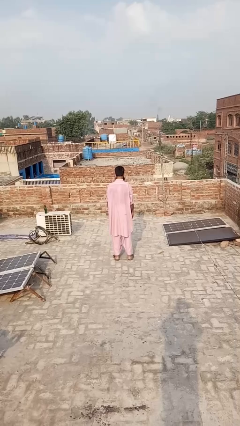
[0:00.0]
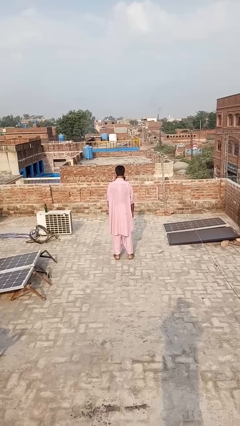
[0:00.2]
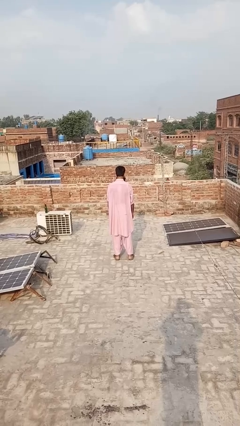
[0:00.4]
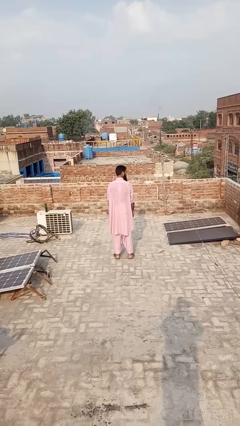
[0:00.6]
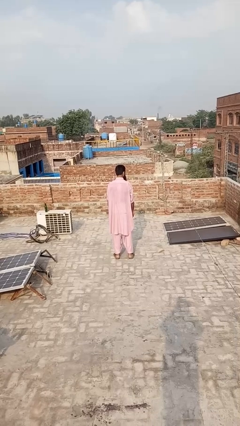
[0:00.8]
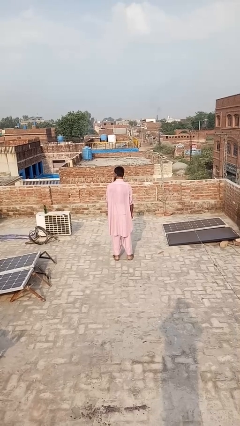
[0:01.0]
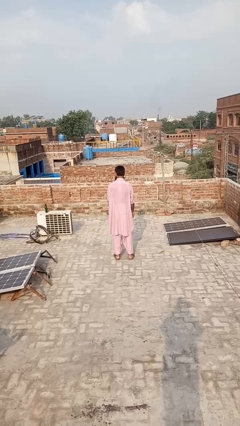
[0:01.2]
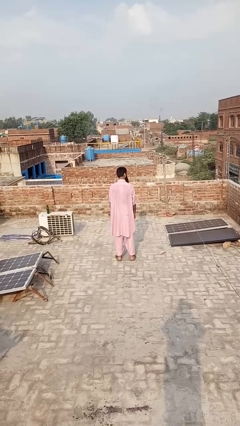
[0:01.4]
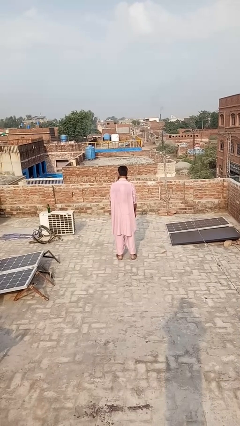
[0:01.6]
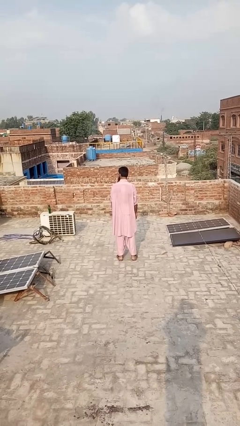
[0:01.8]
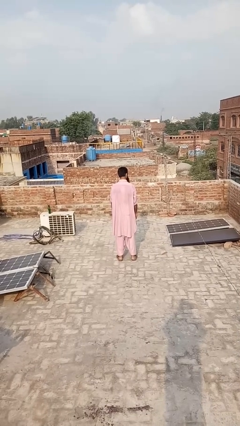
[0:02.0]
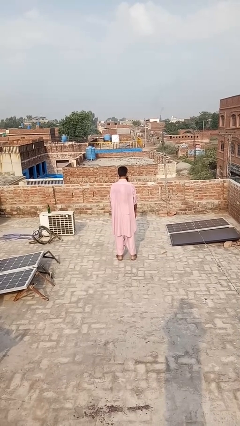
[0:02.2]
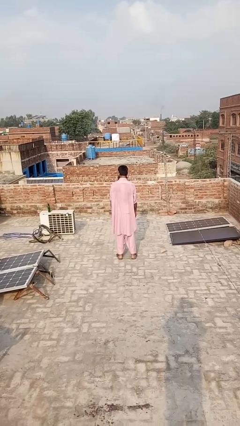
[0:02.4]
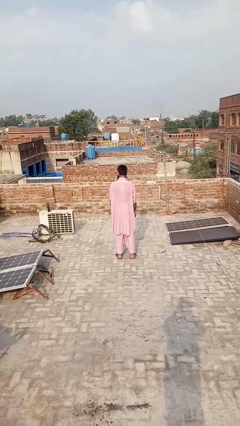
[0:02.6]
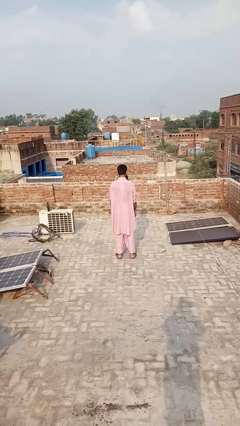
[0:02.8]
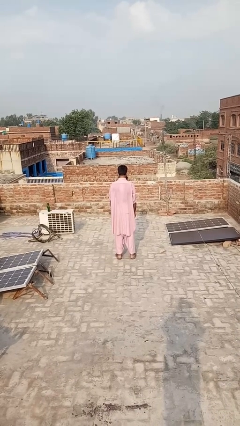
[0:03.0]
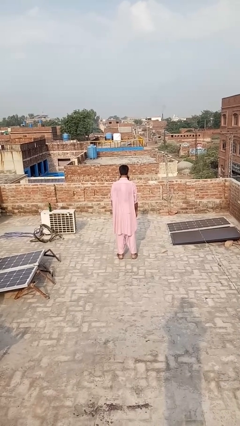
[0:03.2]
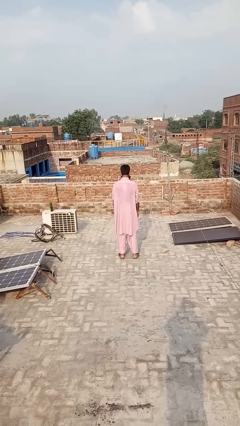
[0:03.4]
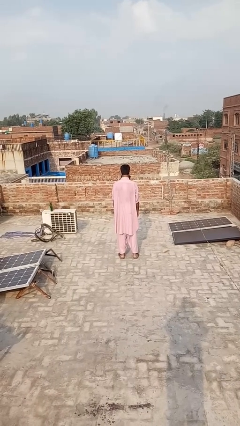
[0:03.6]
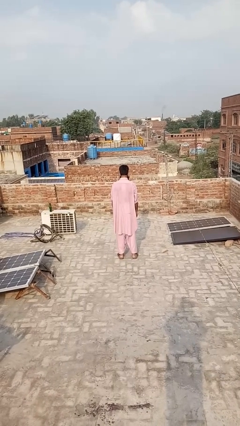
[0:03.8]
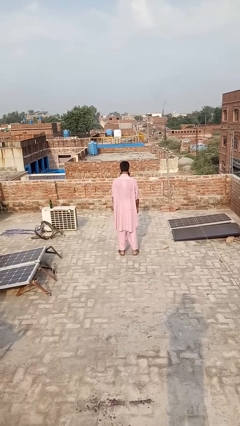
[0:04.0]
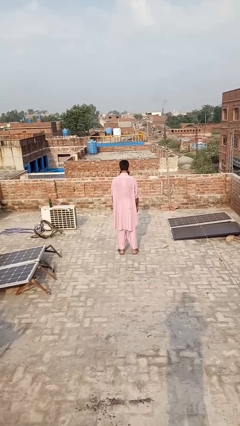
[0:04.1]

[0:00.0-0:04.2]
person shakes head

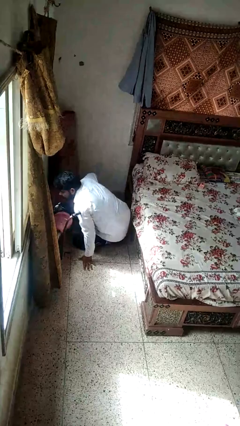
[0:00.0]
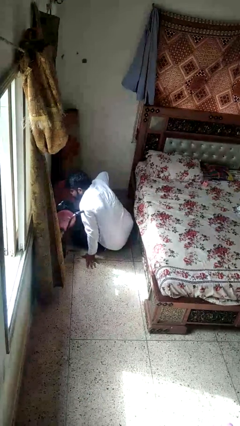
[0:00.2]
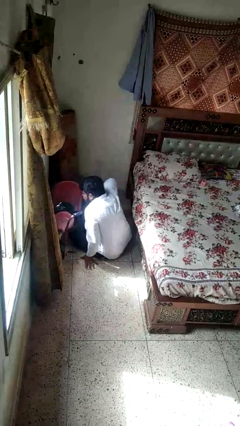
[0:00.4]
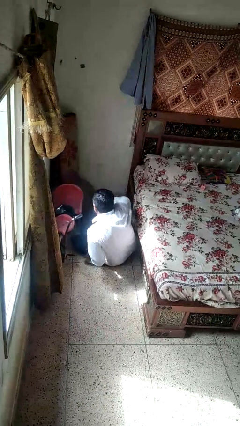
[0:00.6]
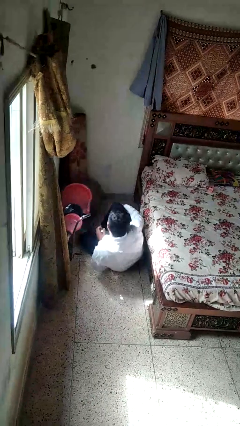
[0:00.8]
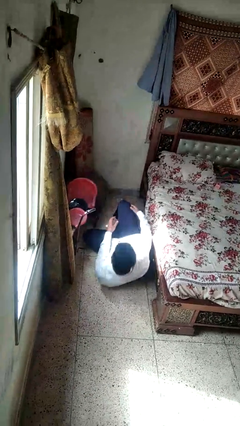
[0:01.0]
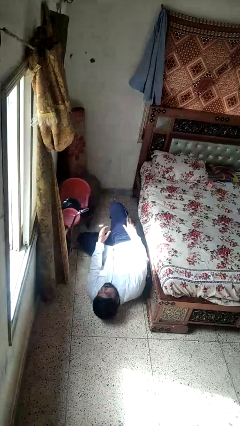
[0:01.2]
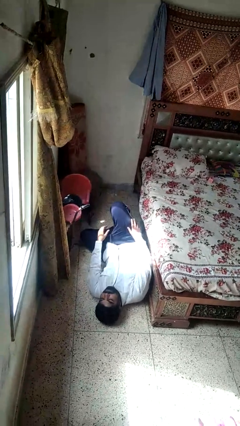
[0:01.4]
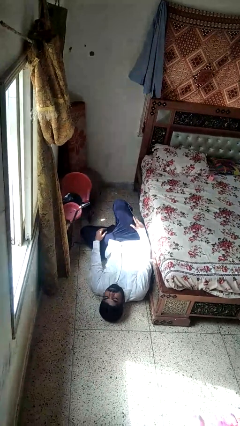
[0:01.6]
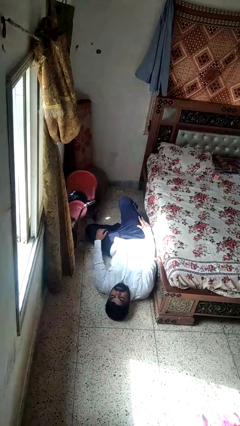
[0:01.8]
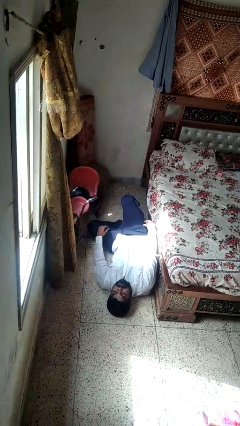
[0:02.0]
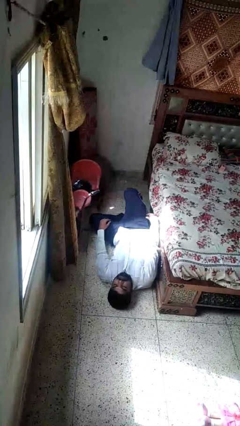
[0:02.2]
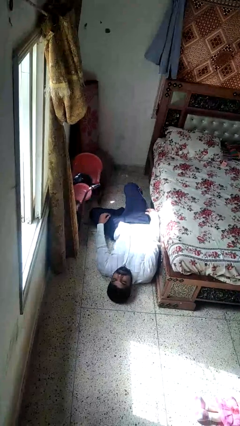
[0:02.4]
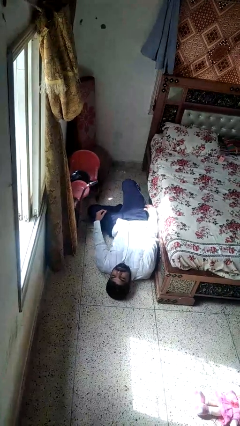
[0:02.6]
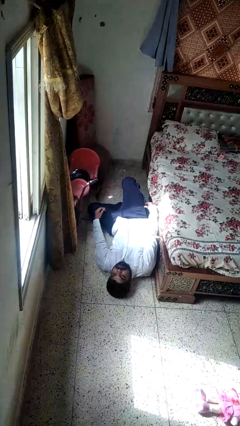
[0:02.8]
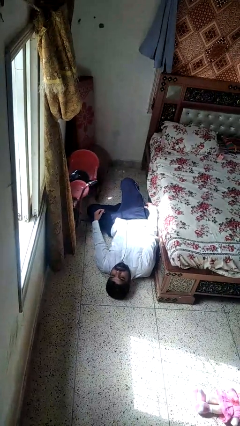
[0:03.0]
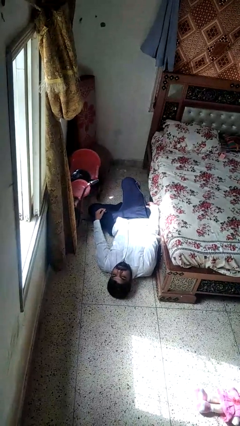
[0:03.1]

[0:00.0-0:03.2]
person lies down on floor

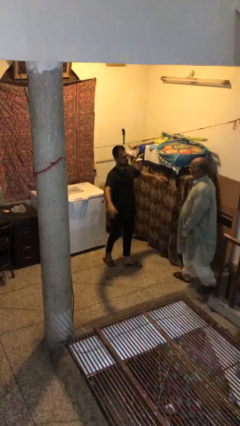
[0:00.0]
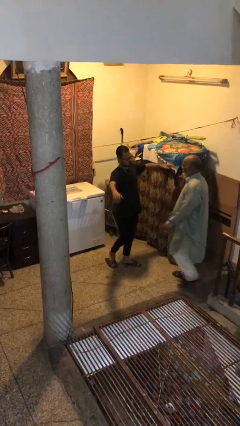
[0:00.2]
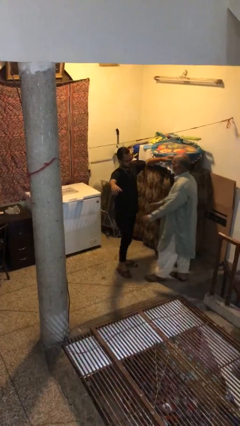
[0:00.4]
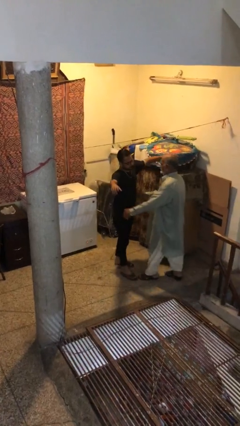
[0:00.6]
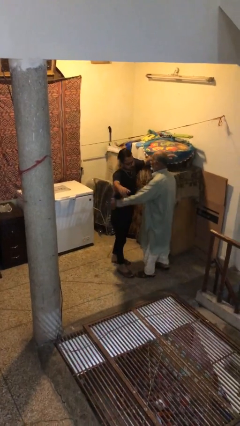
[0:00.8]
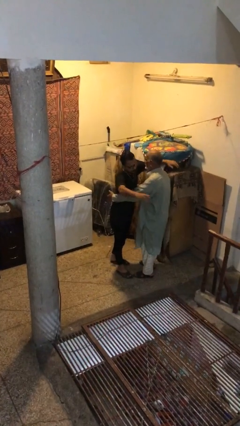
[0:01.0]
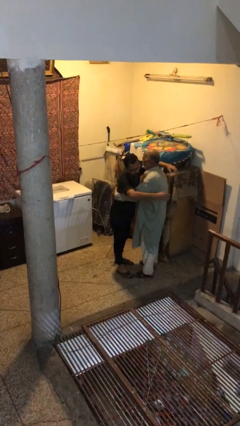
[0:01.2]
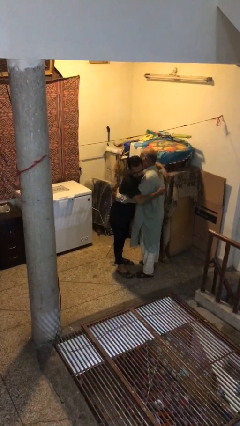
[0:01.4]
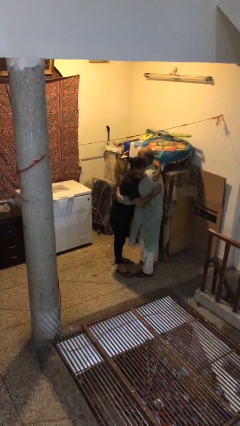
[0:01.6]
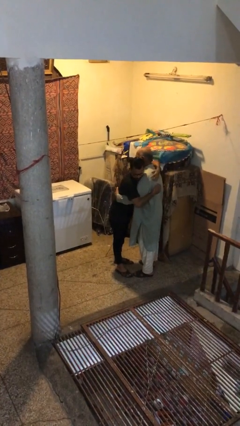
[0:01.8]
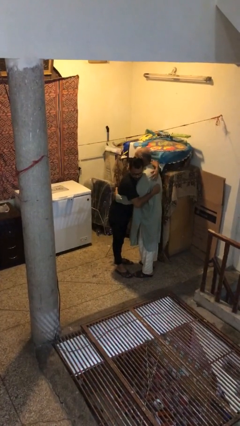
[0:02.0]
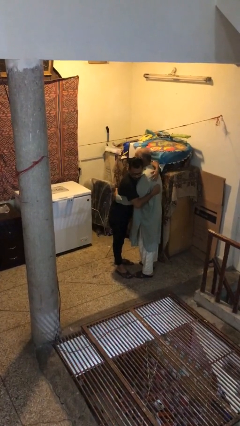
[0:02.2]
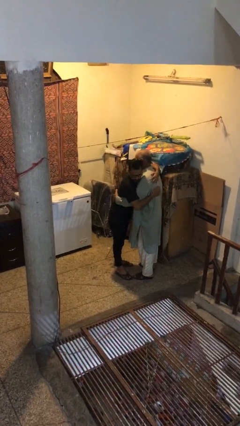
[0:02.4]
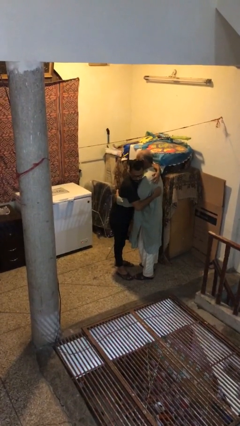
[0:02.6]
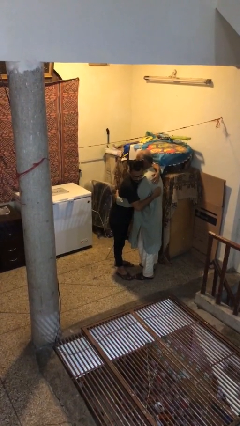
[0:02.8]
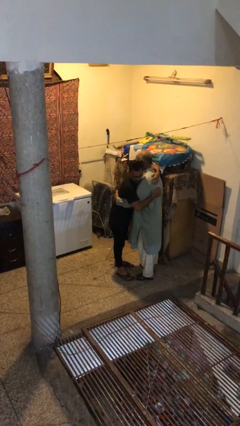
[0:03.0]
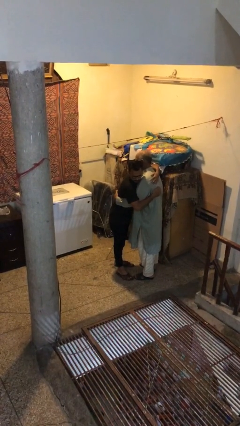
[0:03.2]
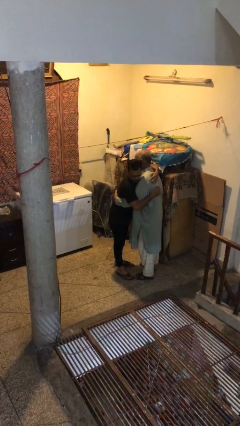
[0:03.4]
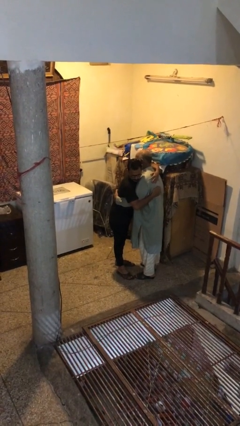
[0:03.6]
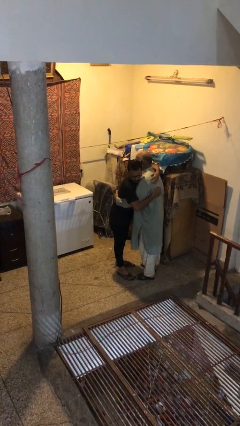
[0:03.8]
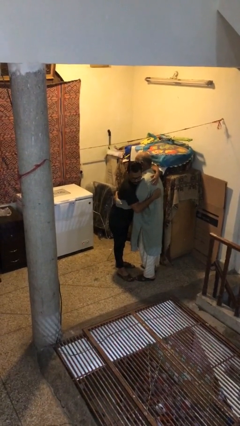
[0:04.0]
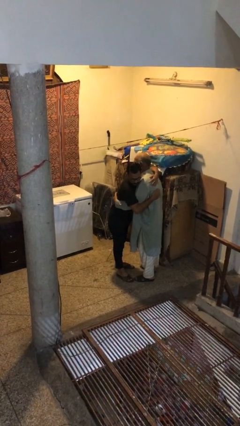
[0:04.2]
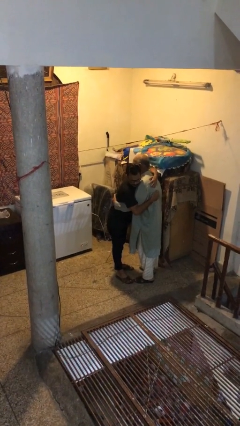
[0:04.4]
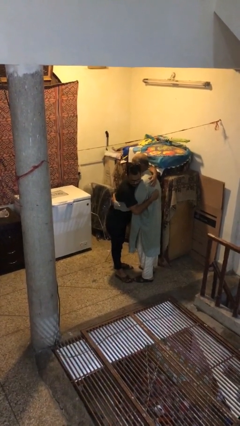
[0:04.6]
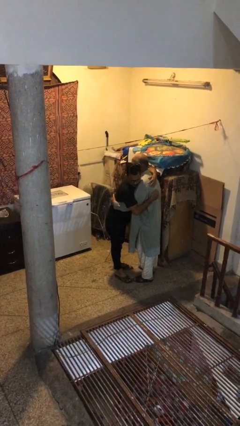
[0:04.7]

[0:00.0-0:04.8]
person embraces person

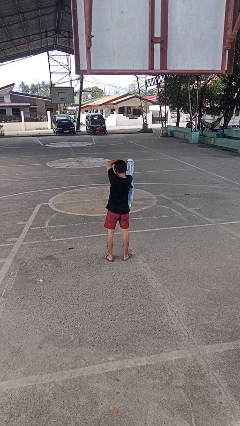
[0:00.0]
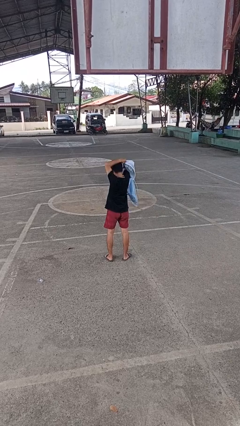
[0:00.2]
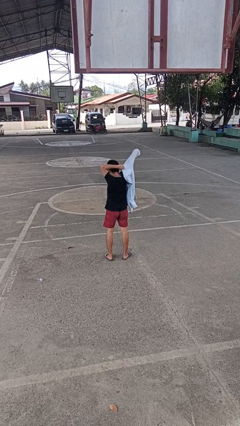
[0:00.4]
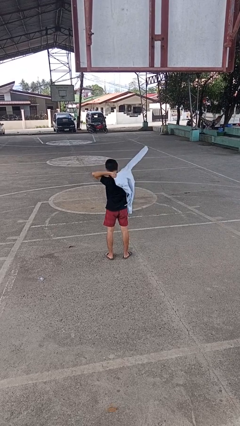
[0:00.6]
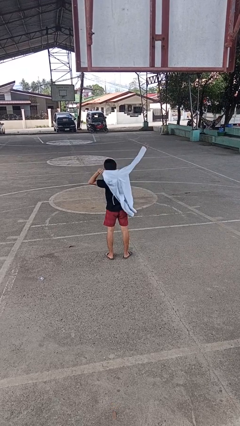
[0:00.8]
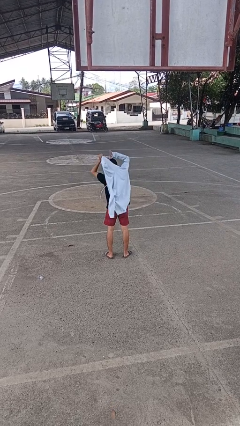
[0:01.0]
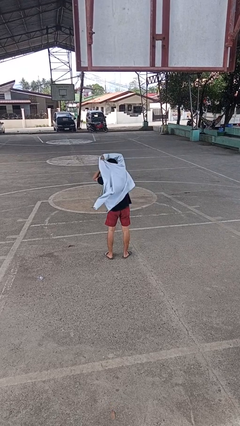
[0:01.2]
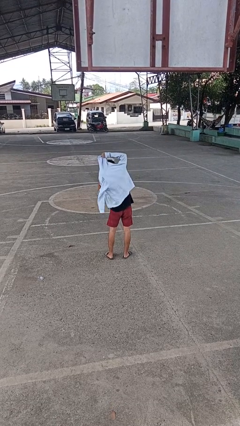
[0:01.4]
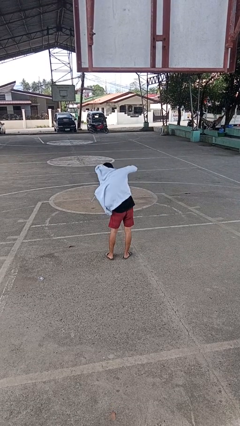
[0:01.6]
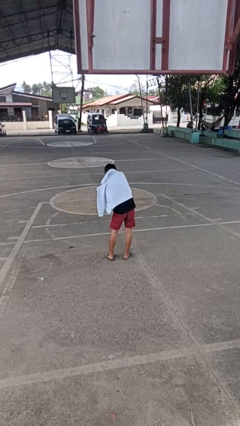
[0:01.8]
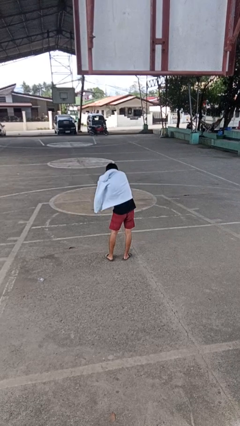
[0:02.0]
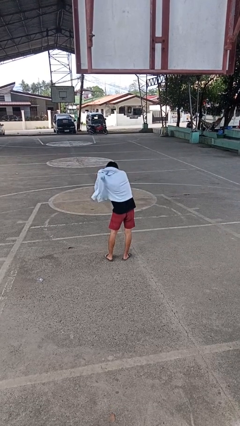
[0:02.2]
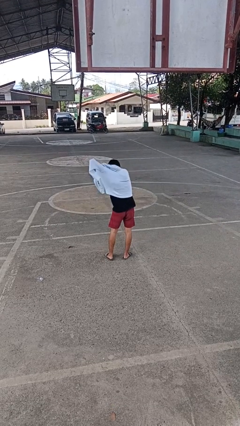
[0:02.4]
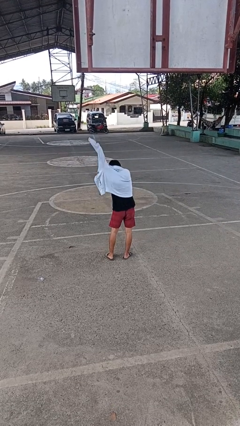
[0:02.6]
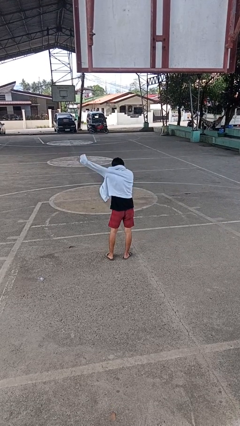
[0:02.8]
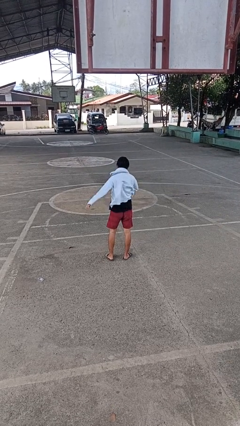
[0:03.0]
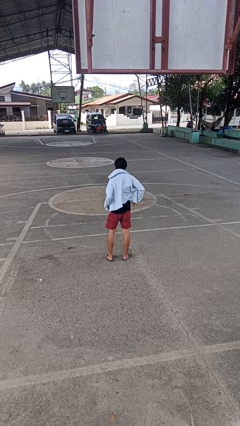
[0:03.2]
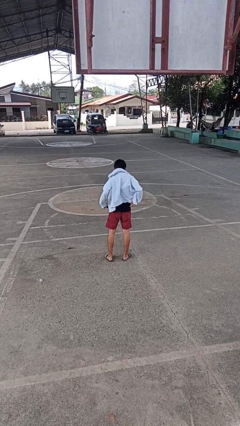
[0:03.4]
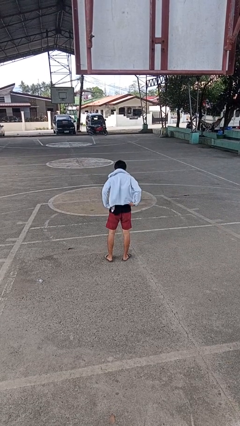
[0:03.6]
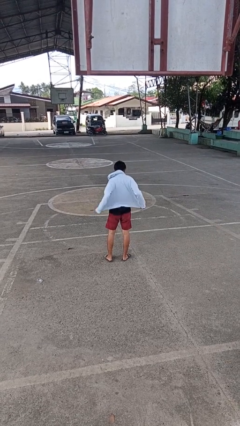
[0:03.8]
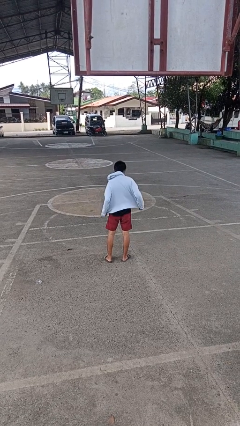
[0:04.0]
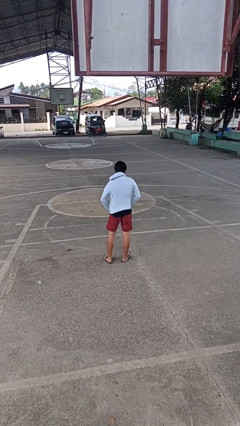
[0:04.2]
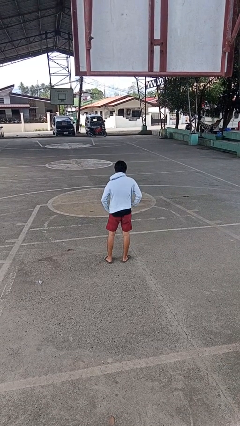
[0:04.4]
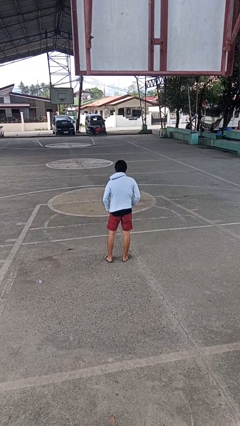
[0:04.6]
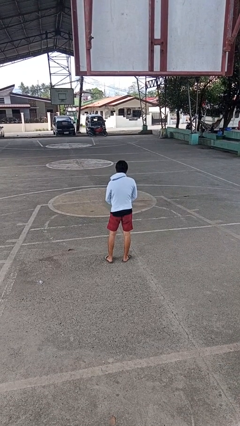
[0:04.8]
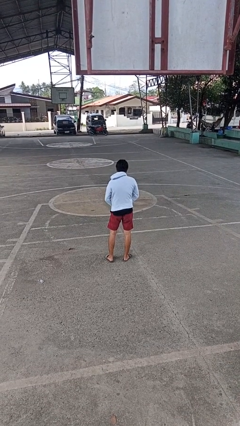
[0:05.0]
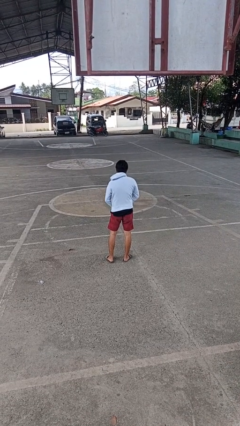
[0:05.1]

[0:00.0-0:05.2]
person puts on jacket

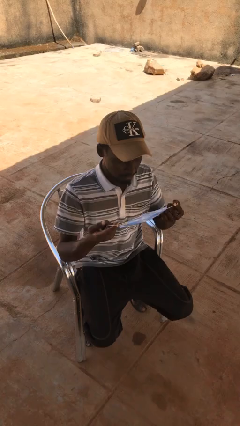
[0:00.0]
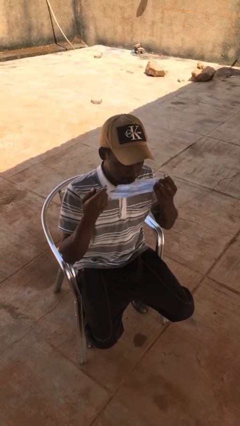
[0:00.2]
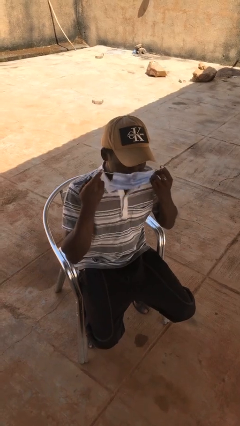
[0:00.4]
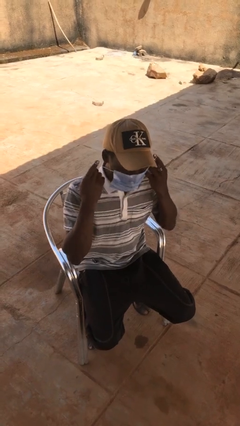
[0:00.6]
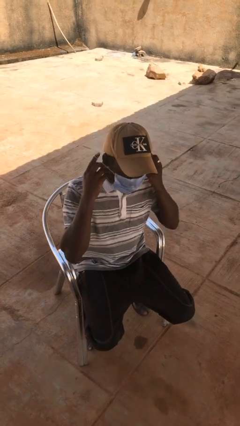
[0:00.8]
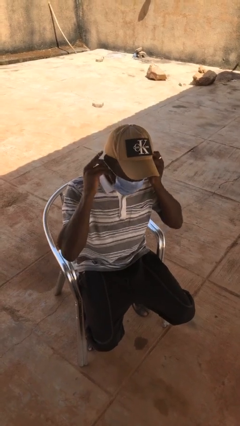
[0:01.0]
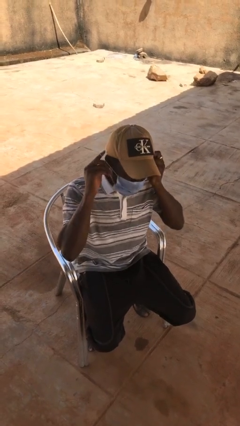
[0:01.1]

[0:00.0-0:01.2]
person takes off facemask
